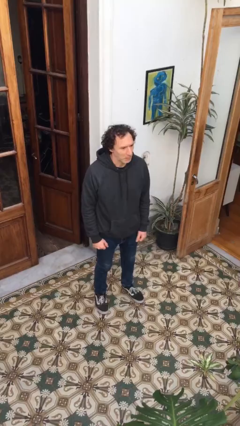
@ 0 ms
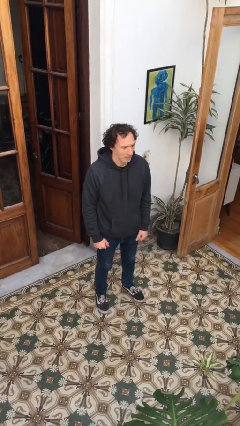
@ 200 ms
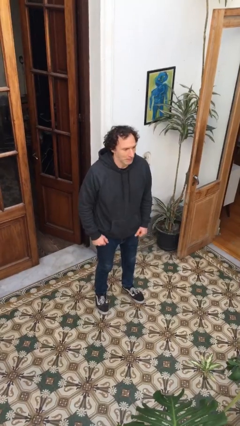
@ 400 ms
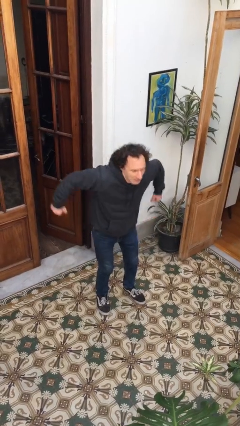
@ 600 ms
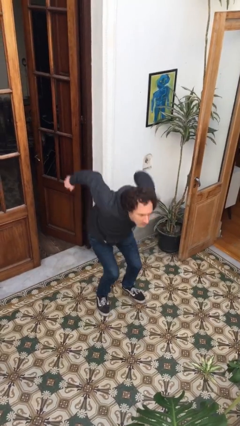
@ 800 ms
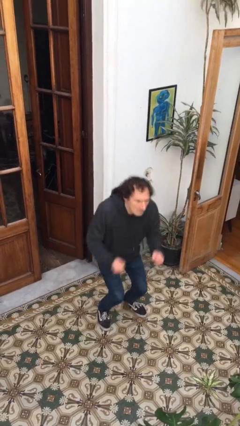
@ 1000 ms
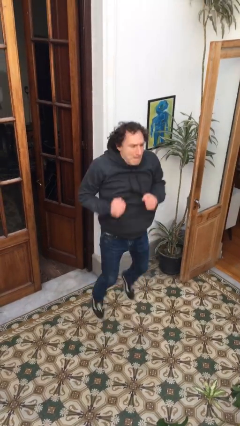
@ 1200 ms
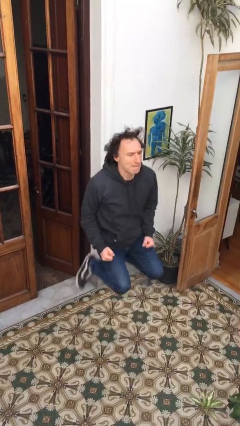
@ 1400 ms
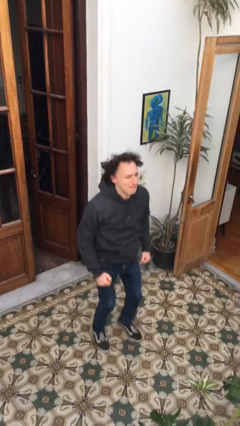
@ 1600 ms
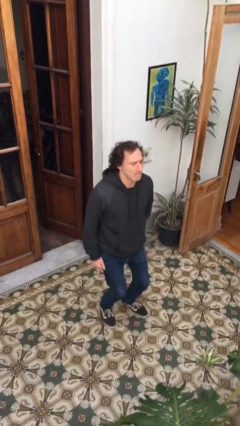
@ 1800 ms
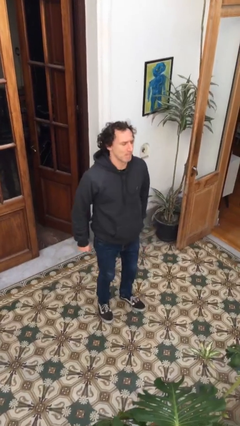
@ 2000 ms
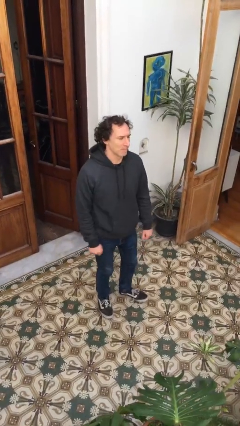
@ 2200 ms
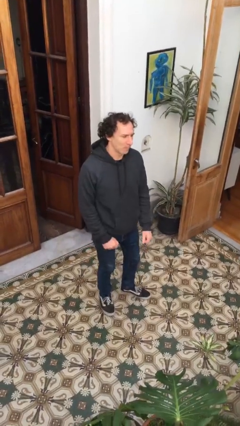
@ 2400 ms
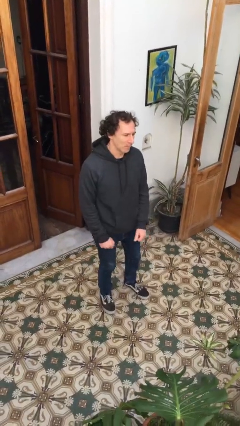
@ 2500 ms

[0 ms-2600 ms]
person jumps

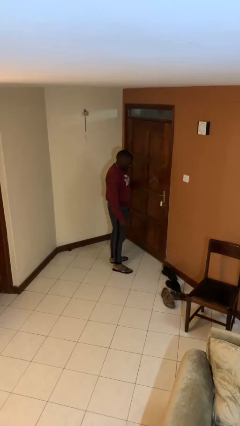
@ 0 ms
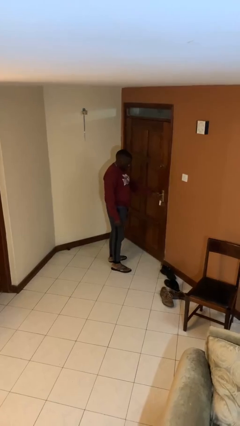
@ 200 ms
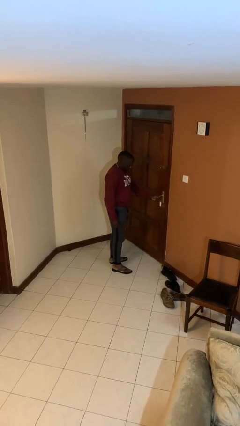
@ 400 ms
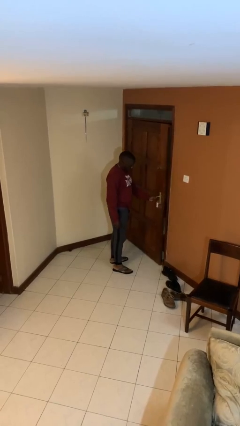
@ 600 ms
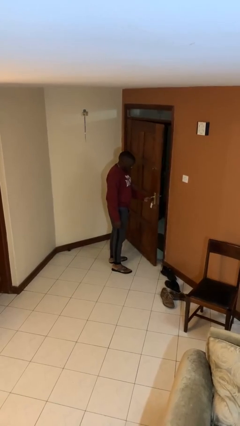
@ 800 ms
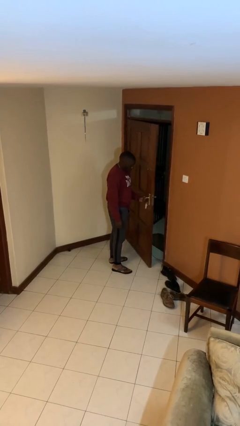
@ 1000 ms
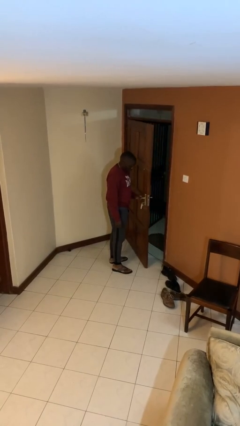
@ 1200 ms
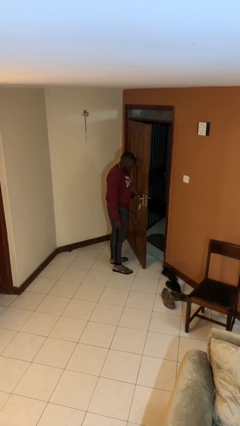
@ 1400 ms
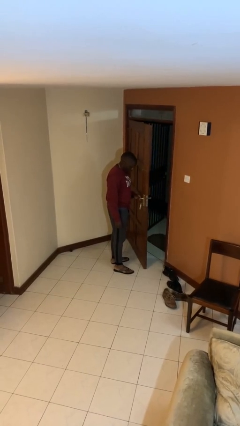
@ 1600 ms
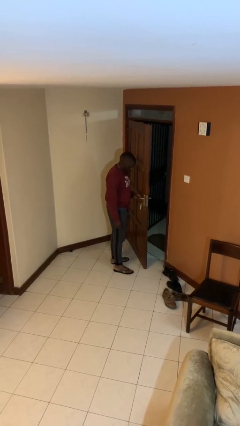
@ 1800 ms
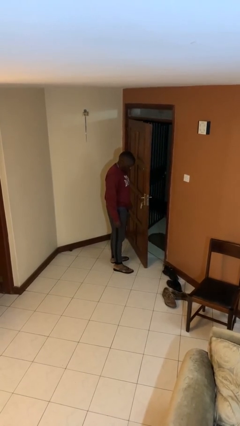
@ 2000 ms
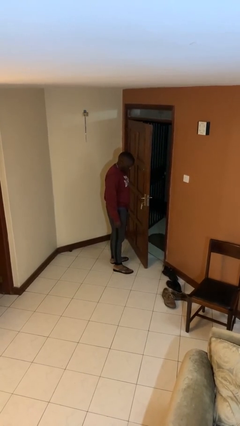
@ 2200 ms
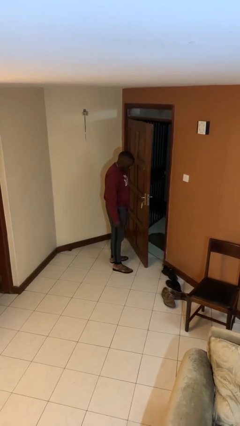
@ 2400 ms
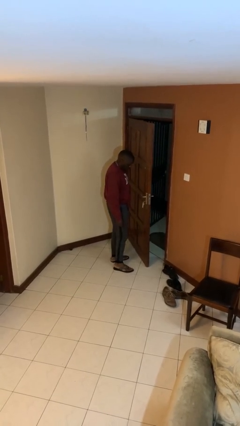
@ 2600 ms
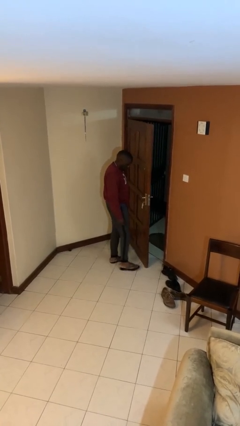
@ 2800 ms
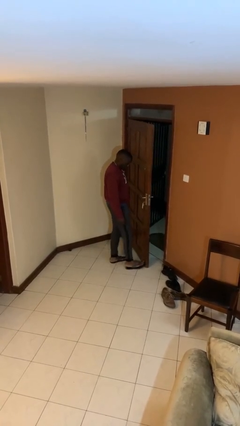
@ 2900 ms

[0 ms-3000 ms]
person opens facility door

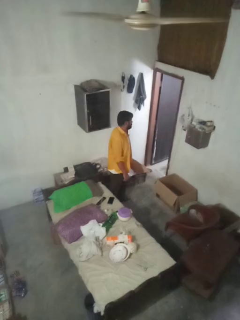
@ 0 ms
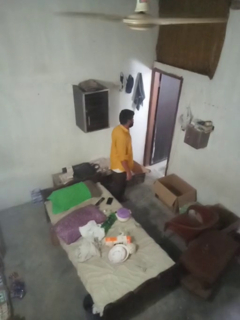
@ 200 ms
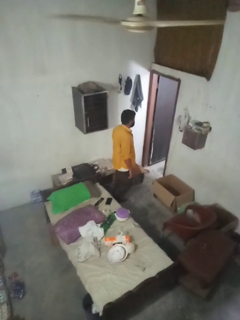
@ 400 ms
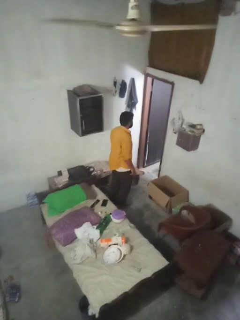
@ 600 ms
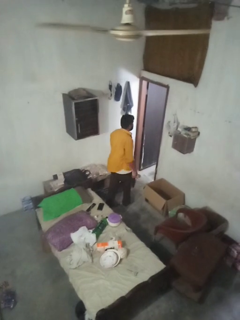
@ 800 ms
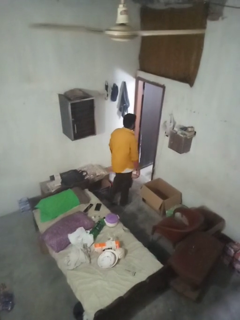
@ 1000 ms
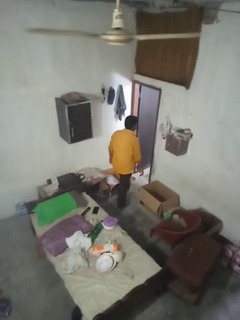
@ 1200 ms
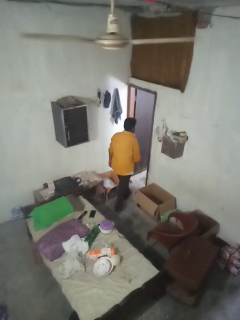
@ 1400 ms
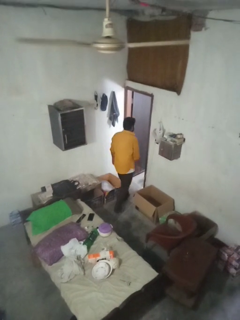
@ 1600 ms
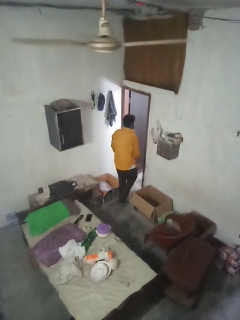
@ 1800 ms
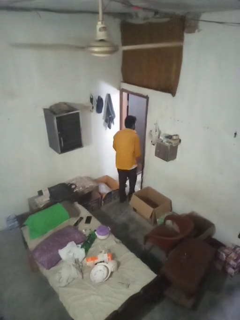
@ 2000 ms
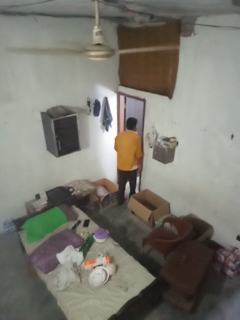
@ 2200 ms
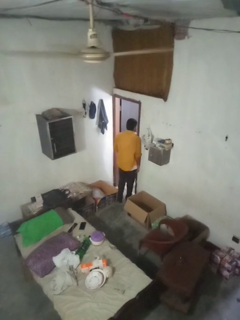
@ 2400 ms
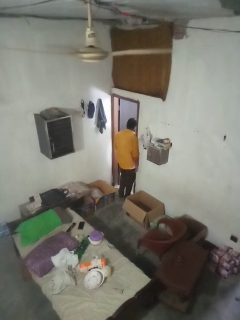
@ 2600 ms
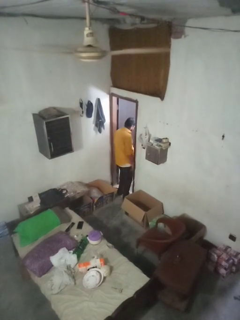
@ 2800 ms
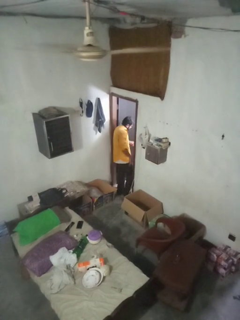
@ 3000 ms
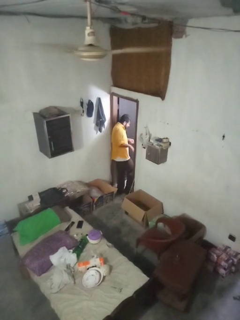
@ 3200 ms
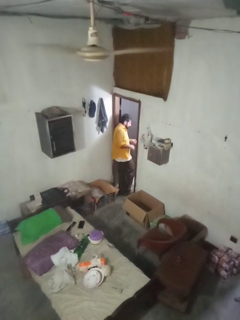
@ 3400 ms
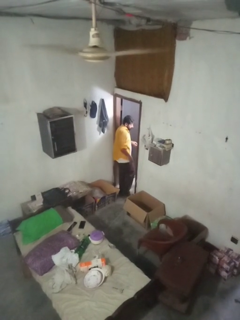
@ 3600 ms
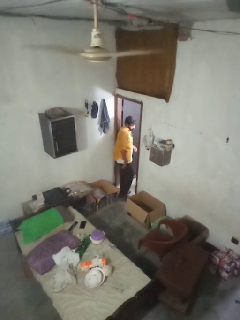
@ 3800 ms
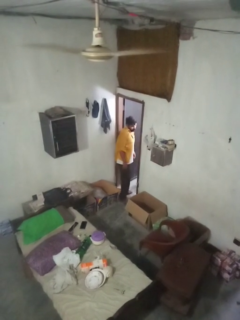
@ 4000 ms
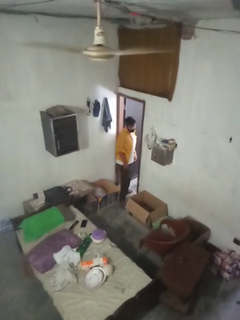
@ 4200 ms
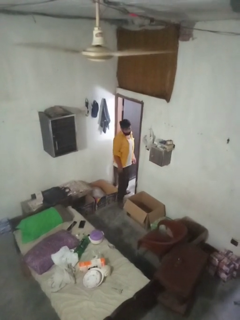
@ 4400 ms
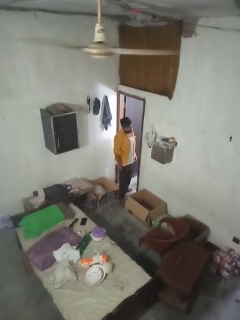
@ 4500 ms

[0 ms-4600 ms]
person bumps into wall

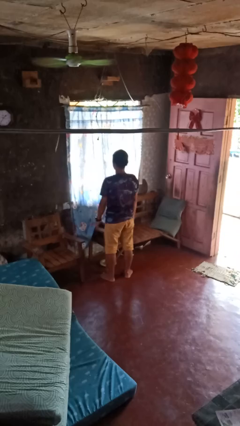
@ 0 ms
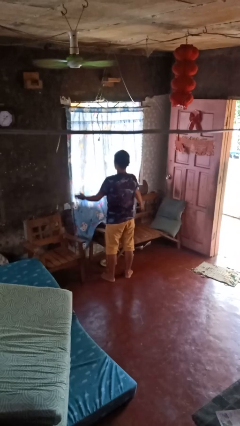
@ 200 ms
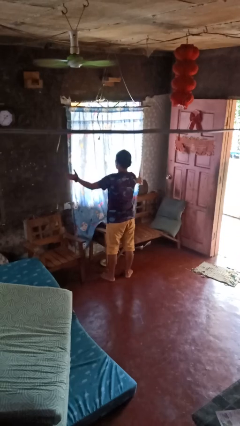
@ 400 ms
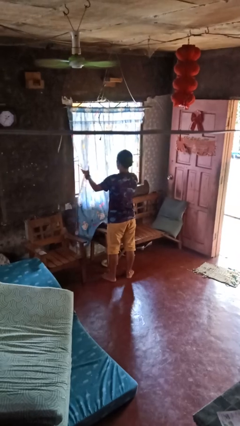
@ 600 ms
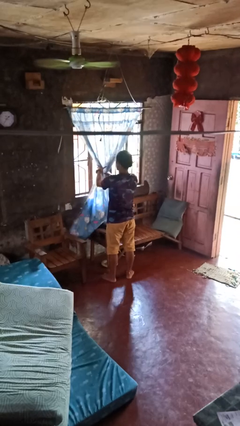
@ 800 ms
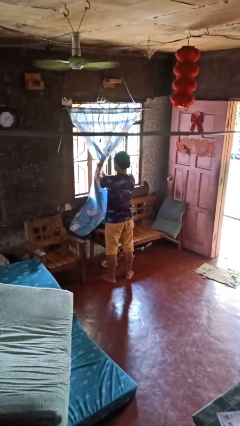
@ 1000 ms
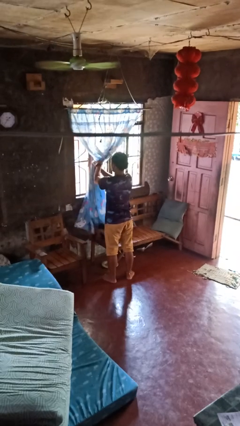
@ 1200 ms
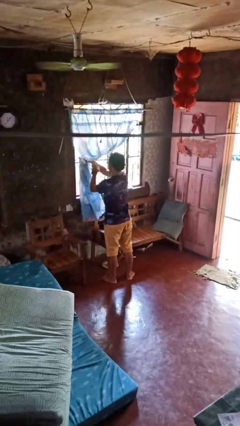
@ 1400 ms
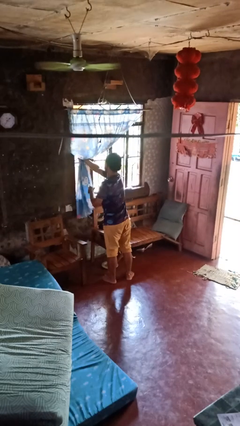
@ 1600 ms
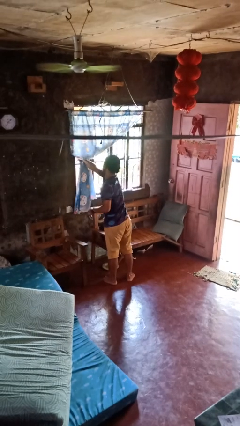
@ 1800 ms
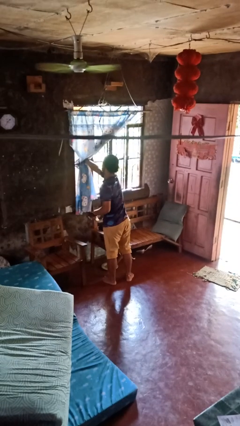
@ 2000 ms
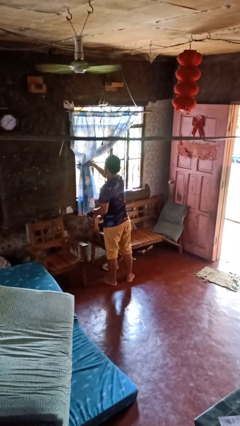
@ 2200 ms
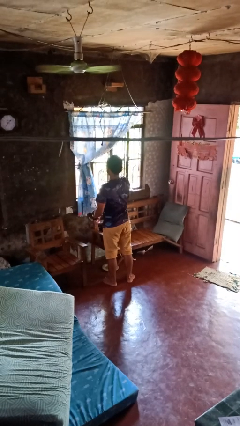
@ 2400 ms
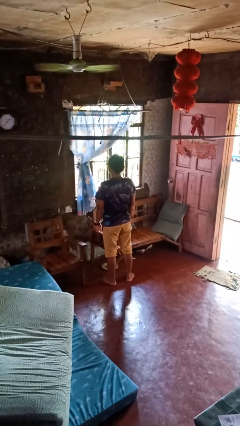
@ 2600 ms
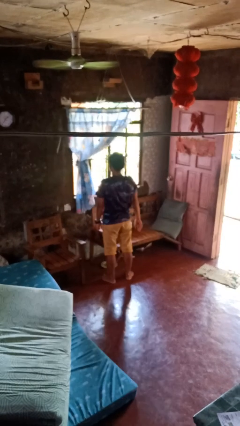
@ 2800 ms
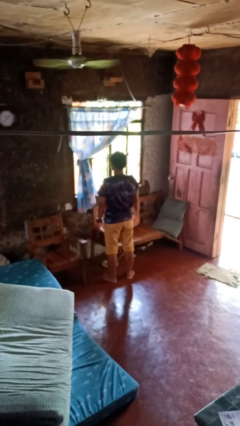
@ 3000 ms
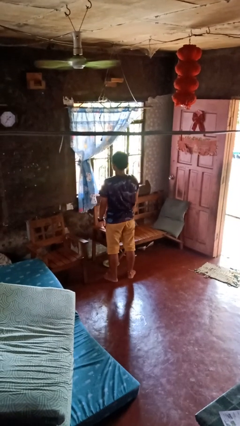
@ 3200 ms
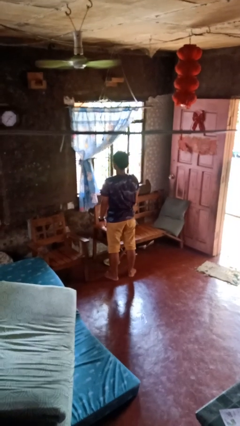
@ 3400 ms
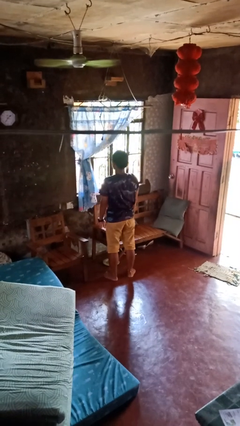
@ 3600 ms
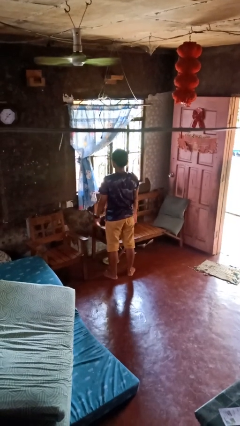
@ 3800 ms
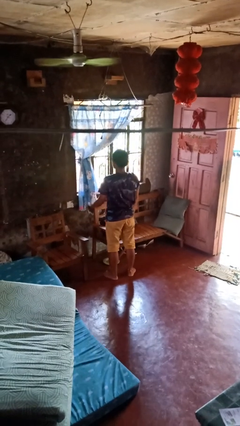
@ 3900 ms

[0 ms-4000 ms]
person opens curtains

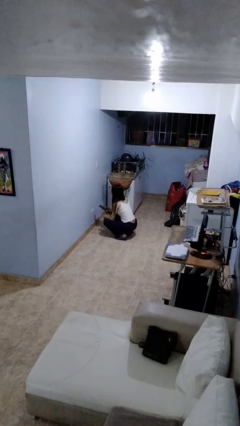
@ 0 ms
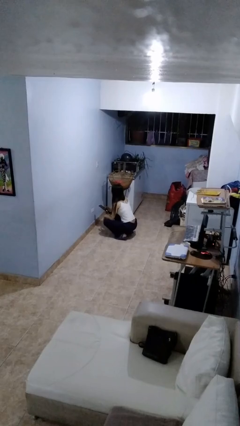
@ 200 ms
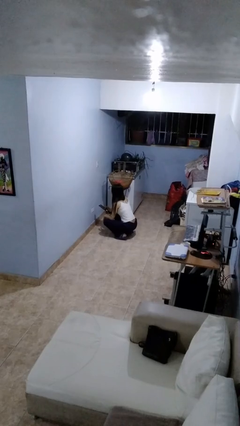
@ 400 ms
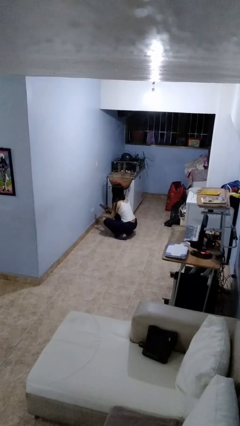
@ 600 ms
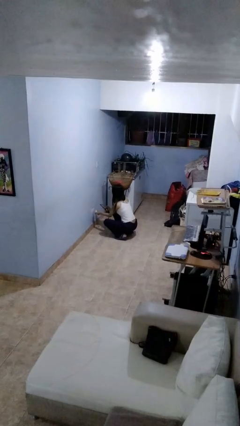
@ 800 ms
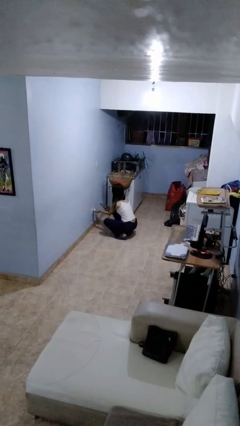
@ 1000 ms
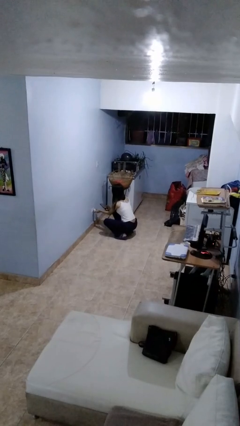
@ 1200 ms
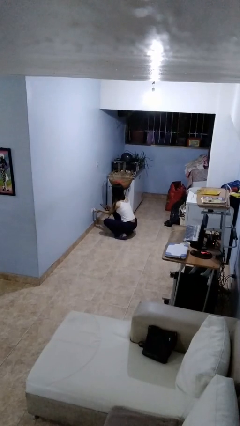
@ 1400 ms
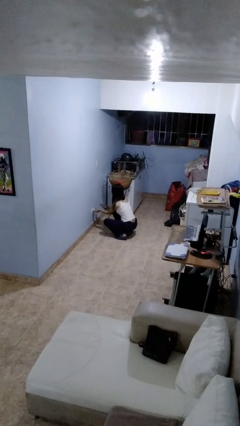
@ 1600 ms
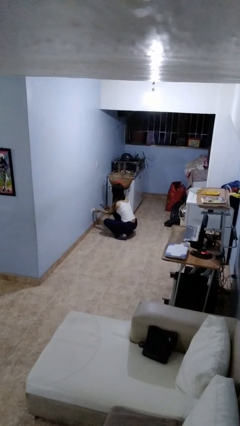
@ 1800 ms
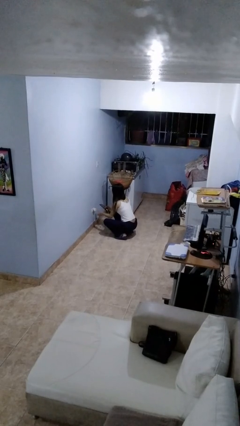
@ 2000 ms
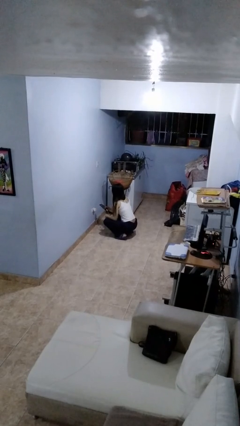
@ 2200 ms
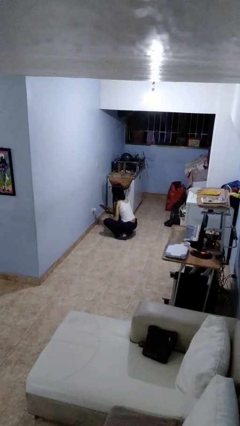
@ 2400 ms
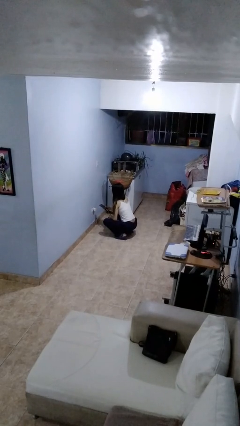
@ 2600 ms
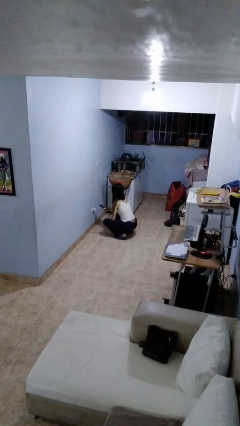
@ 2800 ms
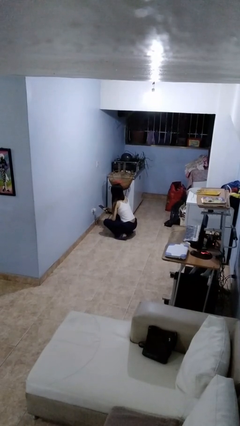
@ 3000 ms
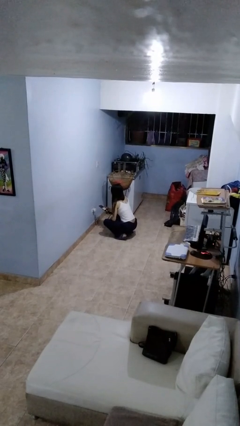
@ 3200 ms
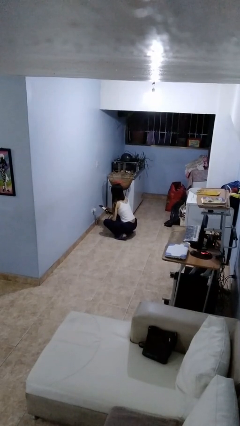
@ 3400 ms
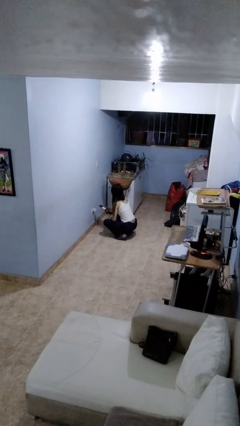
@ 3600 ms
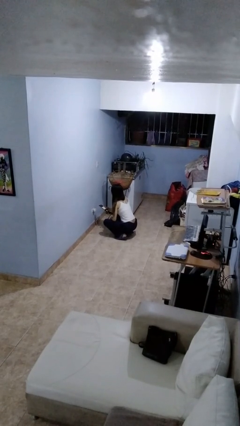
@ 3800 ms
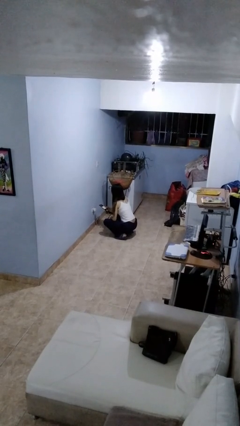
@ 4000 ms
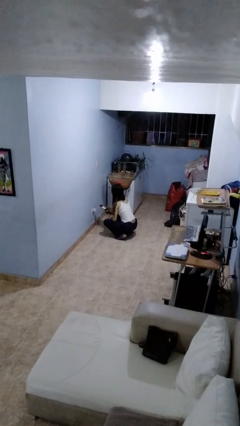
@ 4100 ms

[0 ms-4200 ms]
person plugs into electrical socket

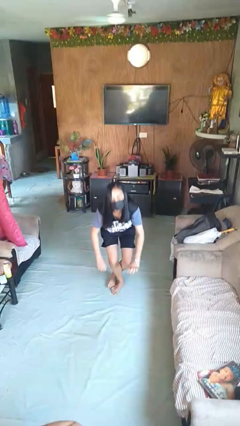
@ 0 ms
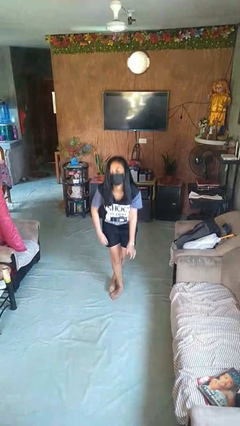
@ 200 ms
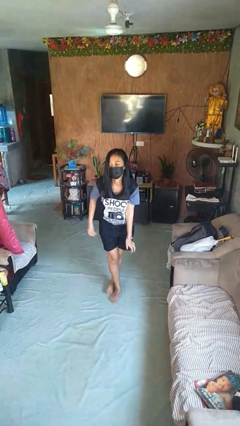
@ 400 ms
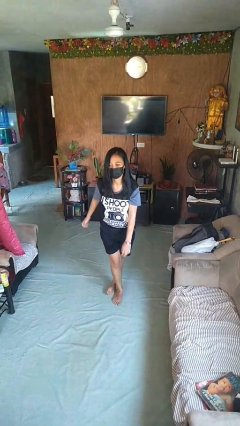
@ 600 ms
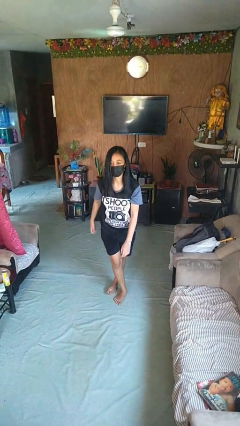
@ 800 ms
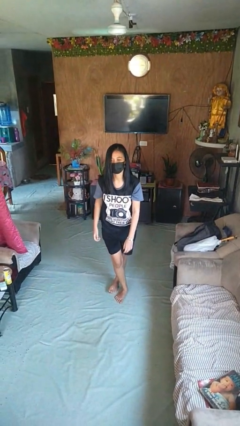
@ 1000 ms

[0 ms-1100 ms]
person stands up from floor
